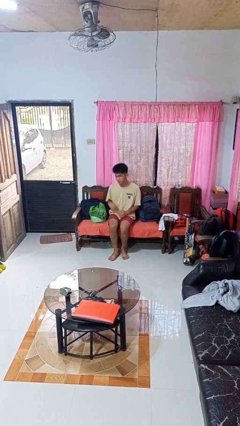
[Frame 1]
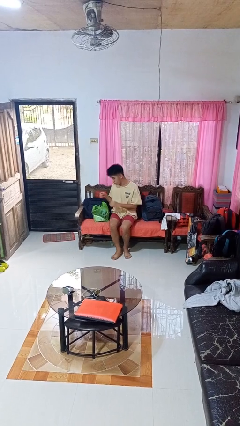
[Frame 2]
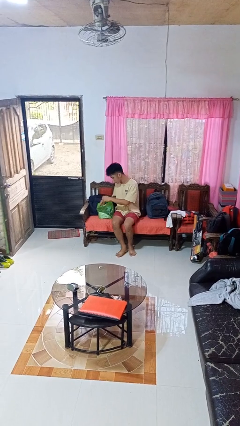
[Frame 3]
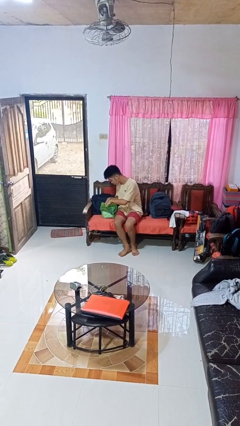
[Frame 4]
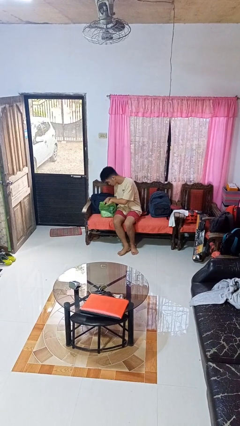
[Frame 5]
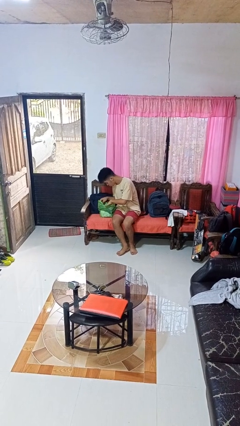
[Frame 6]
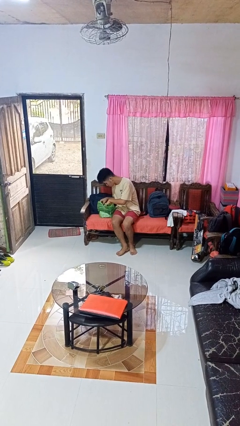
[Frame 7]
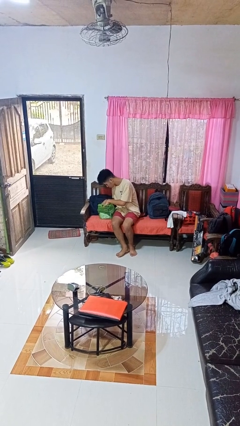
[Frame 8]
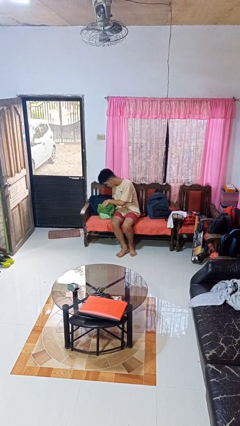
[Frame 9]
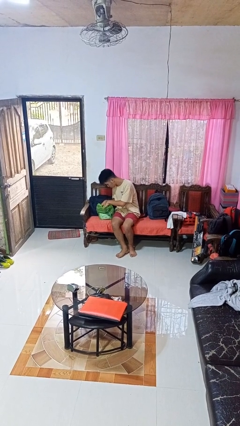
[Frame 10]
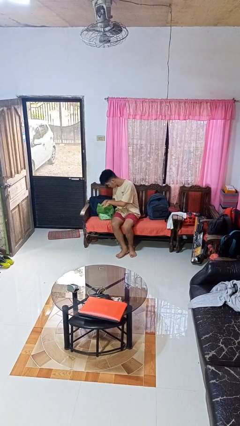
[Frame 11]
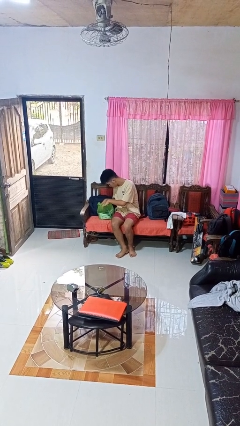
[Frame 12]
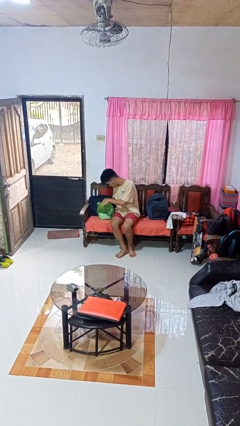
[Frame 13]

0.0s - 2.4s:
person searches in bag

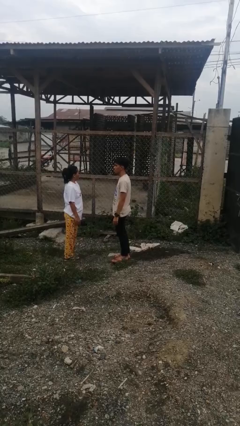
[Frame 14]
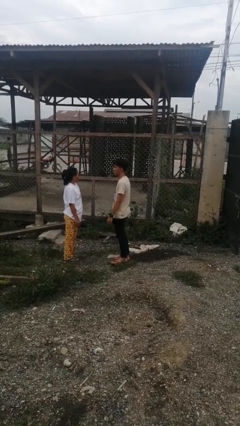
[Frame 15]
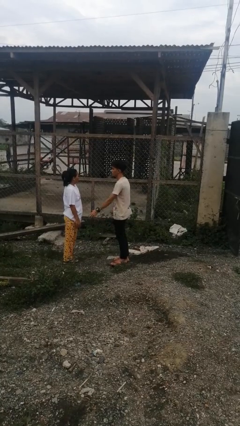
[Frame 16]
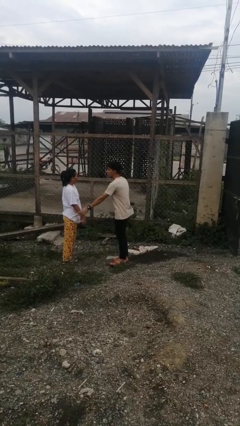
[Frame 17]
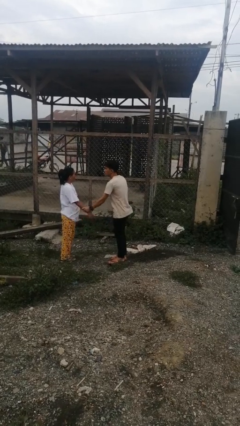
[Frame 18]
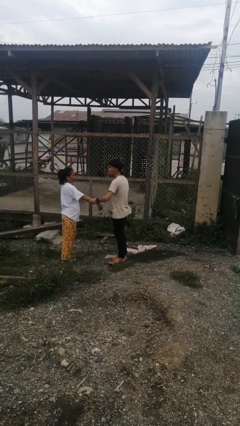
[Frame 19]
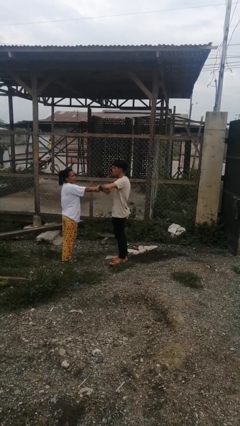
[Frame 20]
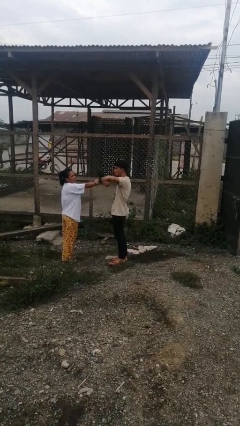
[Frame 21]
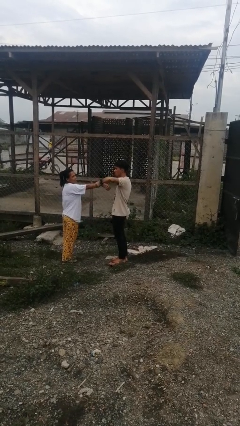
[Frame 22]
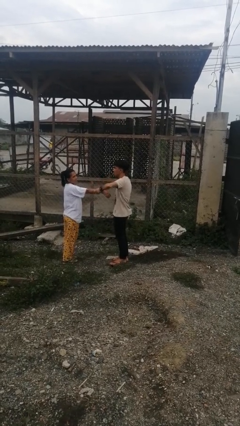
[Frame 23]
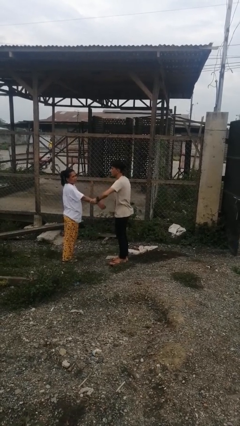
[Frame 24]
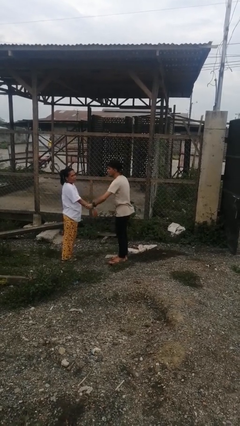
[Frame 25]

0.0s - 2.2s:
person grabs person by forearm

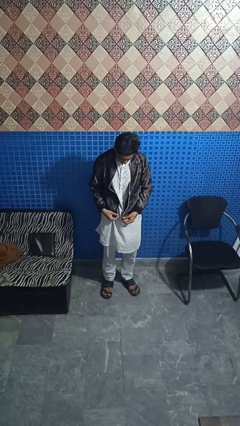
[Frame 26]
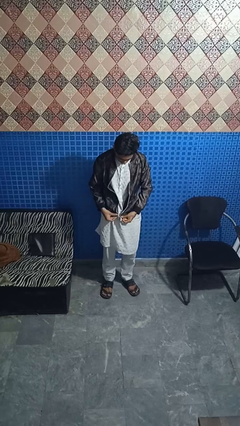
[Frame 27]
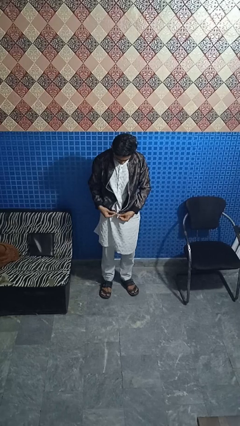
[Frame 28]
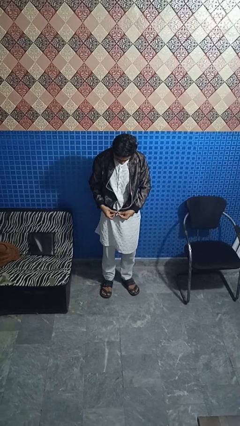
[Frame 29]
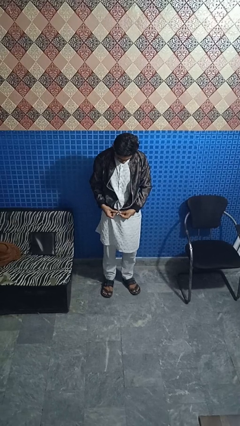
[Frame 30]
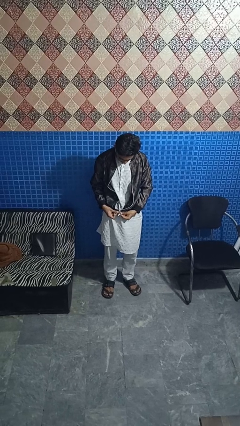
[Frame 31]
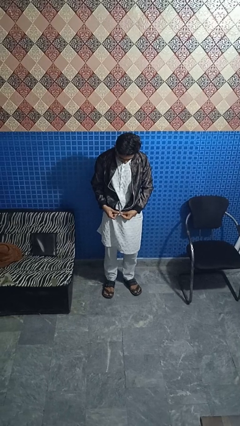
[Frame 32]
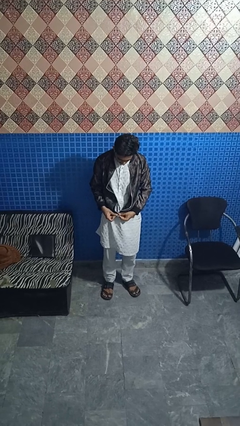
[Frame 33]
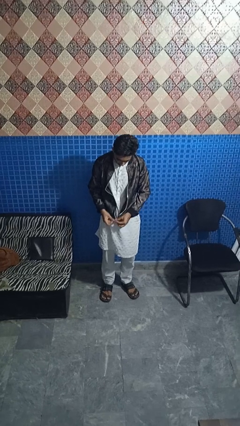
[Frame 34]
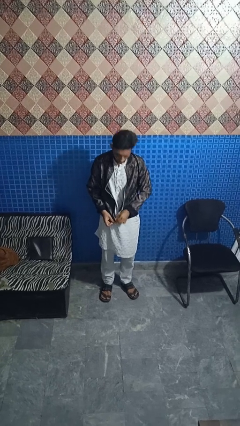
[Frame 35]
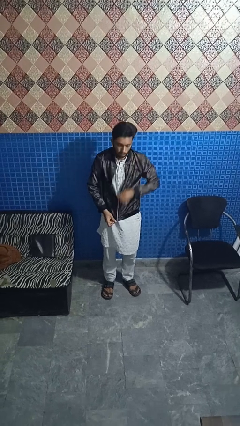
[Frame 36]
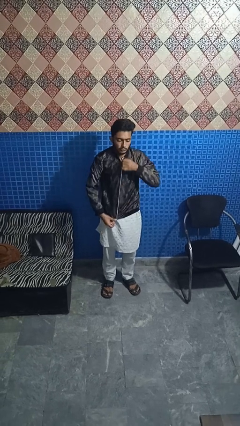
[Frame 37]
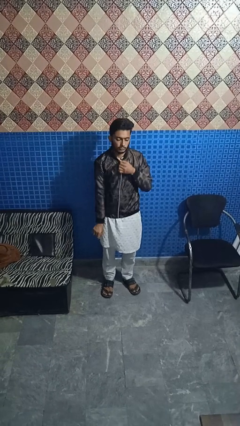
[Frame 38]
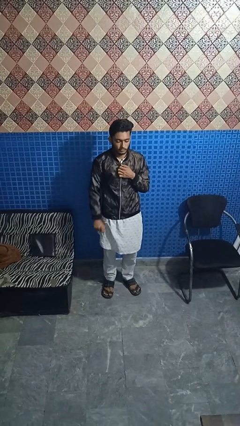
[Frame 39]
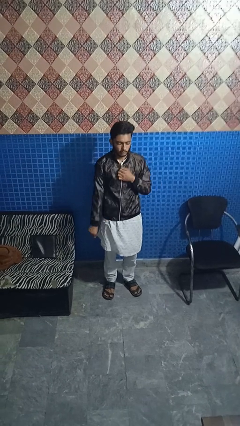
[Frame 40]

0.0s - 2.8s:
person zips up jacket

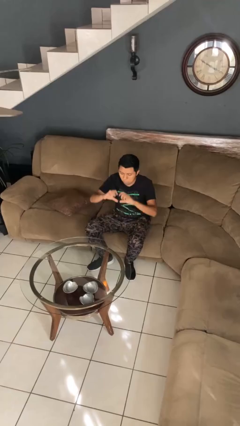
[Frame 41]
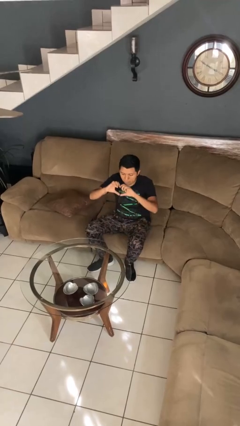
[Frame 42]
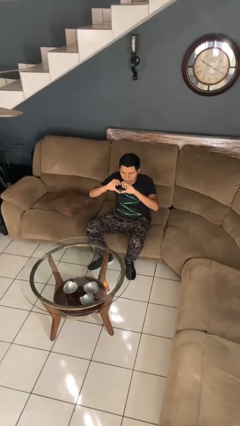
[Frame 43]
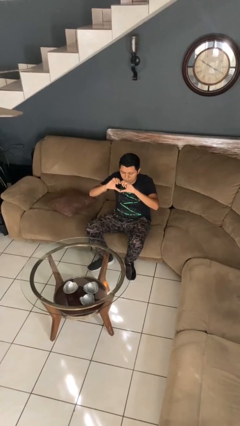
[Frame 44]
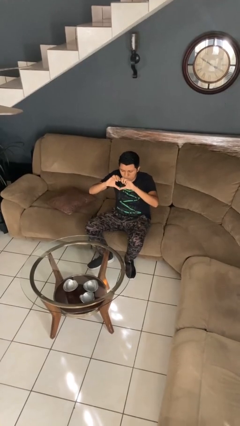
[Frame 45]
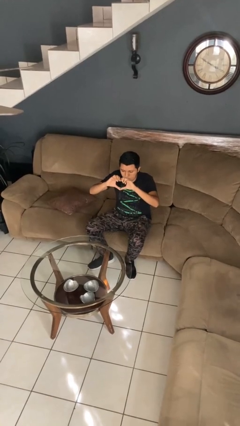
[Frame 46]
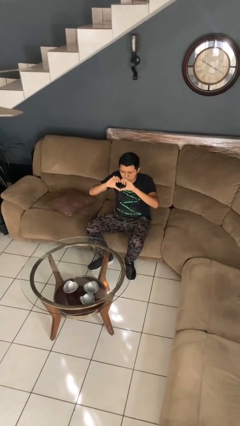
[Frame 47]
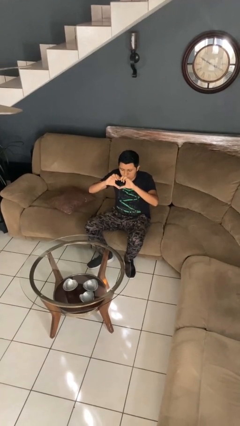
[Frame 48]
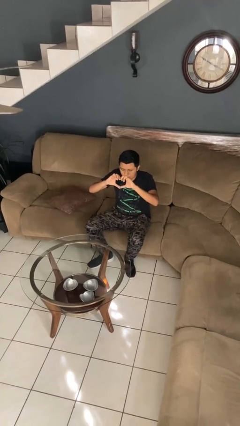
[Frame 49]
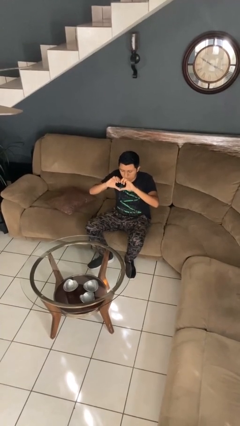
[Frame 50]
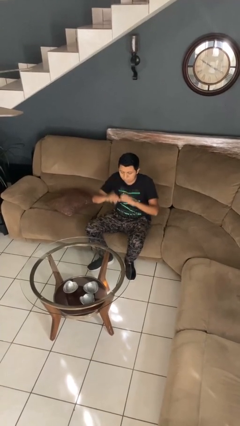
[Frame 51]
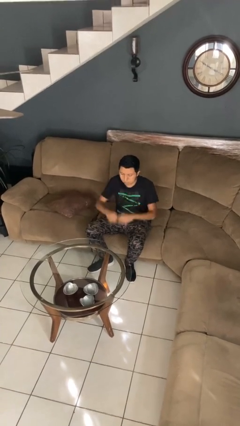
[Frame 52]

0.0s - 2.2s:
person gestures heart

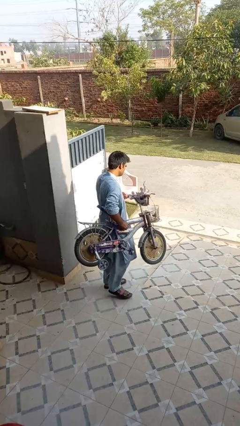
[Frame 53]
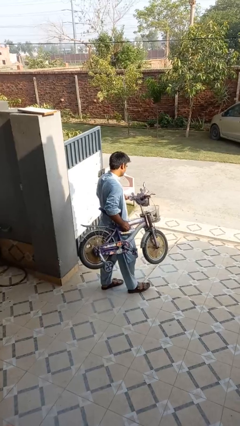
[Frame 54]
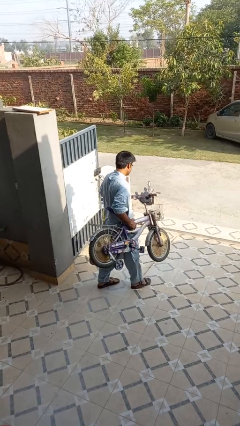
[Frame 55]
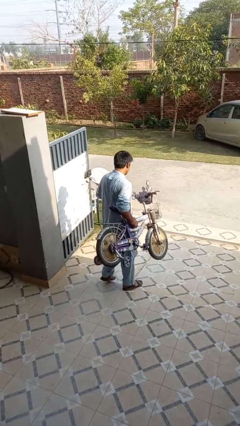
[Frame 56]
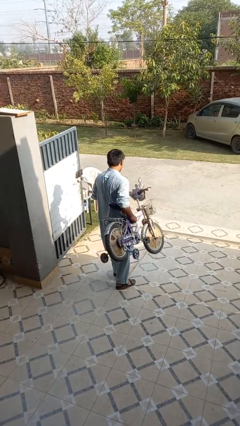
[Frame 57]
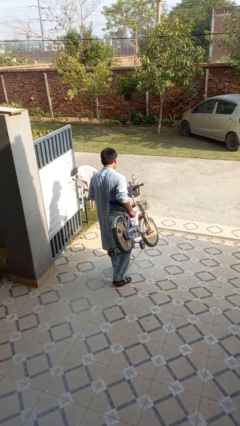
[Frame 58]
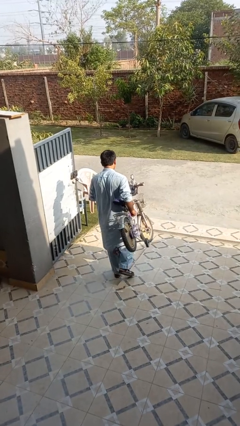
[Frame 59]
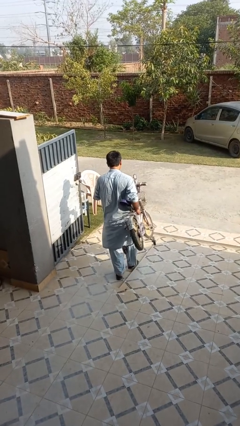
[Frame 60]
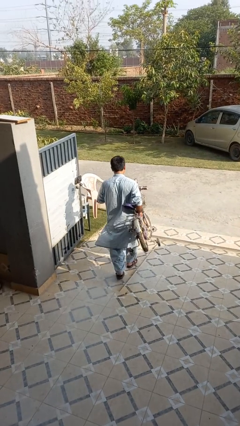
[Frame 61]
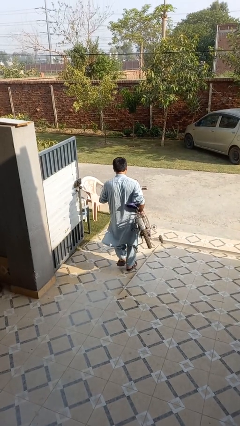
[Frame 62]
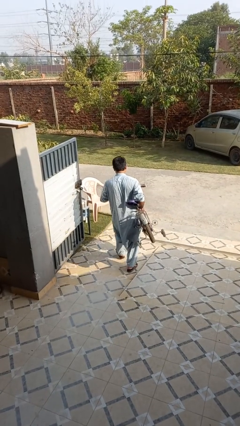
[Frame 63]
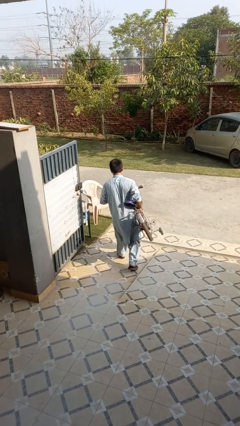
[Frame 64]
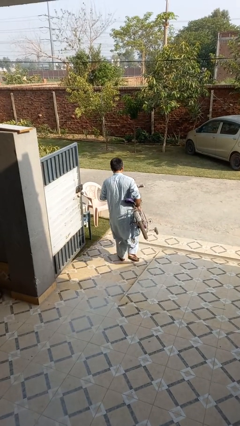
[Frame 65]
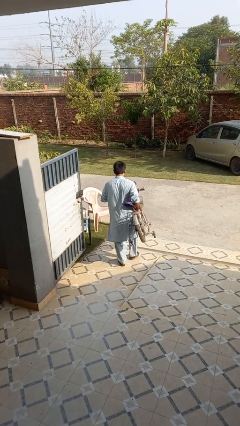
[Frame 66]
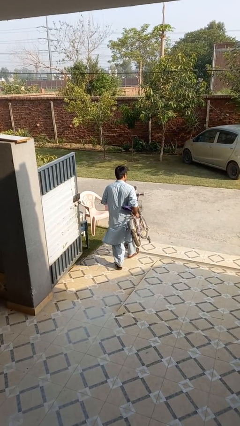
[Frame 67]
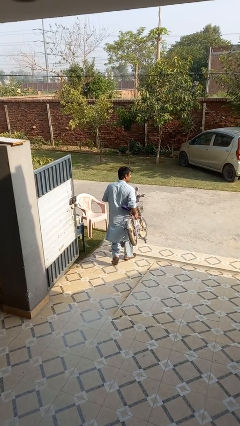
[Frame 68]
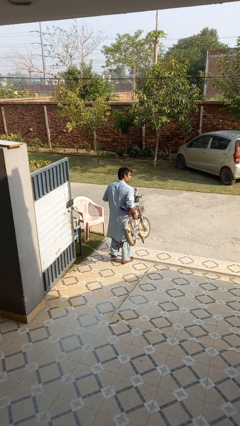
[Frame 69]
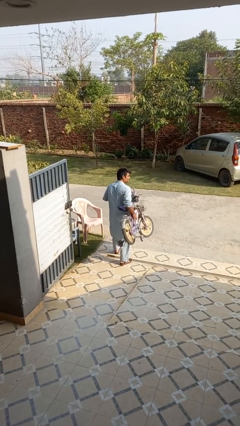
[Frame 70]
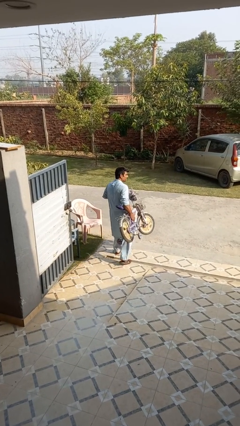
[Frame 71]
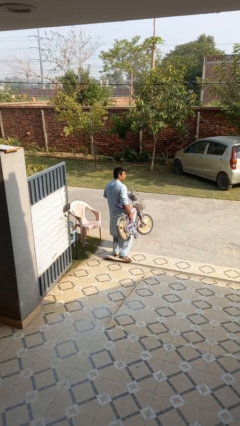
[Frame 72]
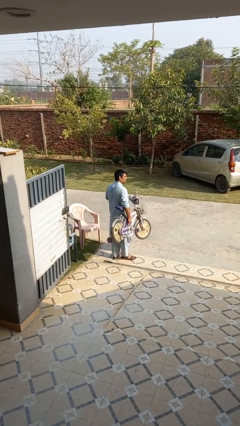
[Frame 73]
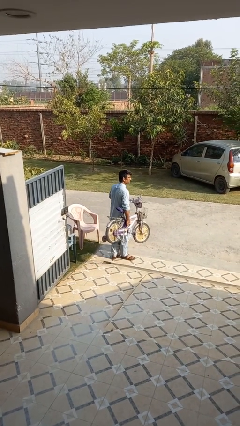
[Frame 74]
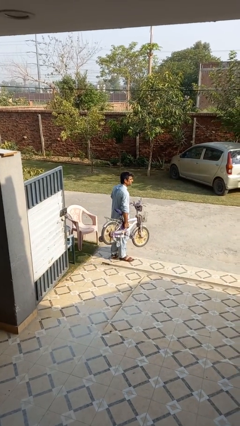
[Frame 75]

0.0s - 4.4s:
person carries bicycle

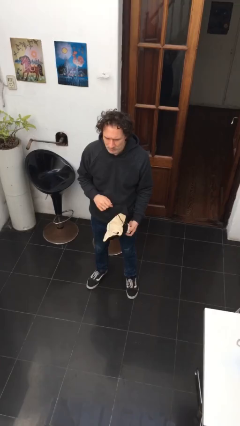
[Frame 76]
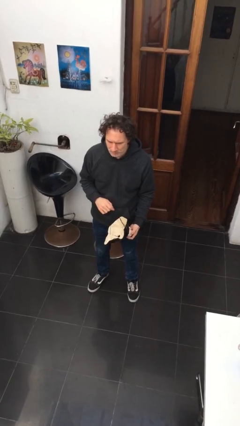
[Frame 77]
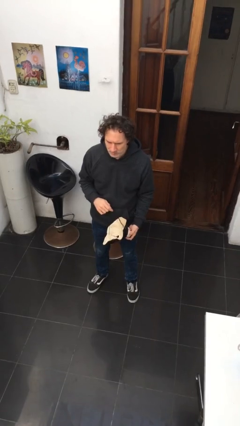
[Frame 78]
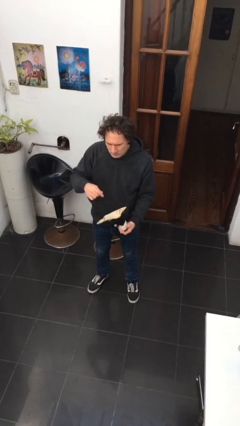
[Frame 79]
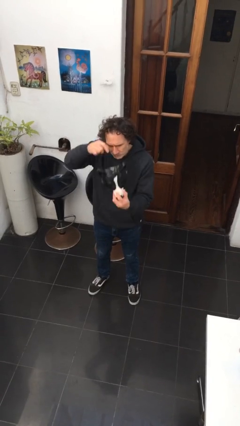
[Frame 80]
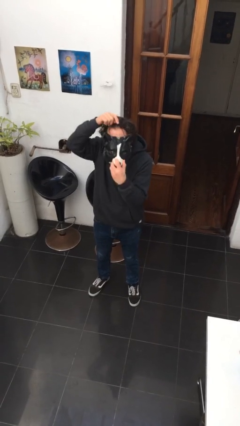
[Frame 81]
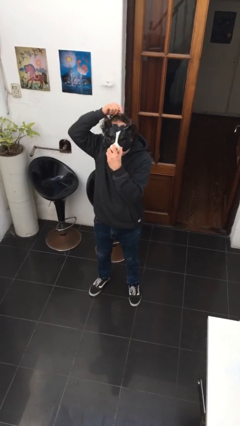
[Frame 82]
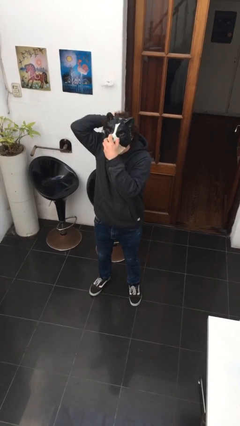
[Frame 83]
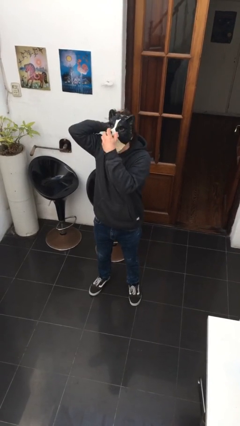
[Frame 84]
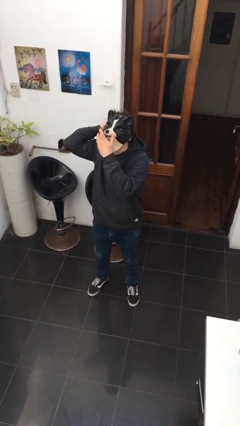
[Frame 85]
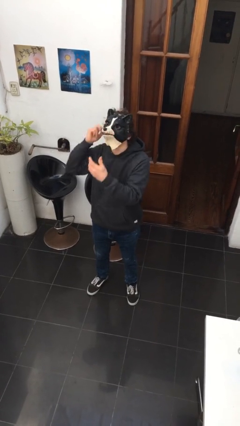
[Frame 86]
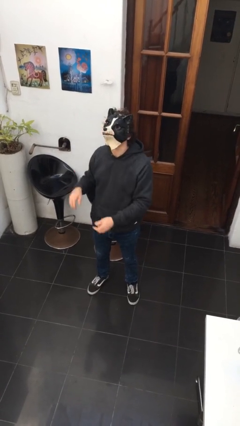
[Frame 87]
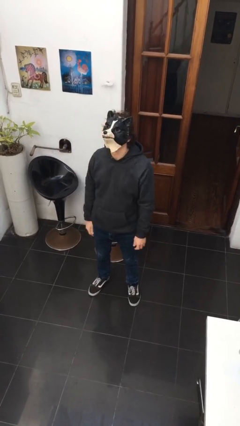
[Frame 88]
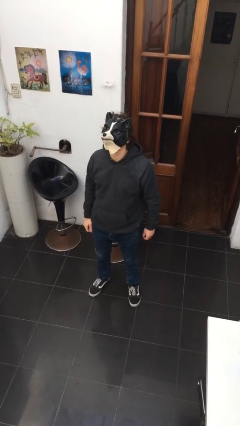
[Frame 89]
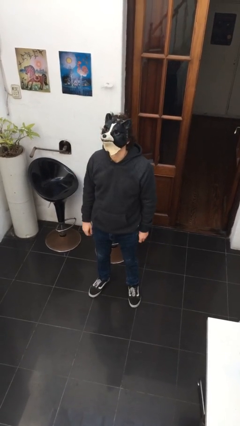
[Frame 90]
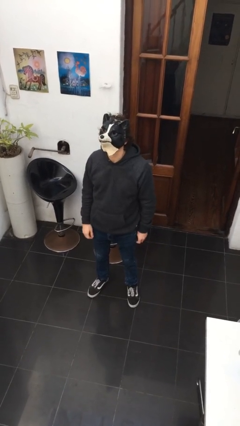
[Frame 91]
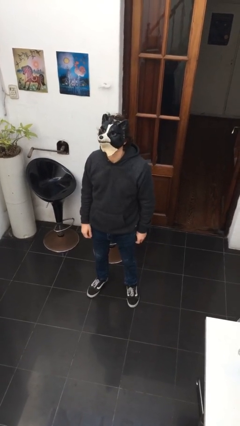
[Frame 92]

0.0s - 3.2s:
person puts on facemask

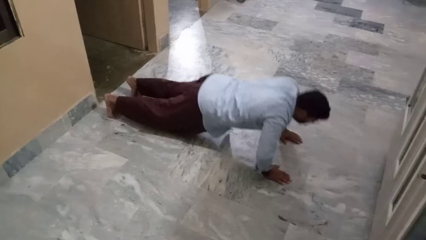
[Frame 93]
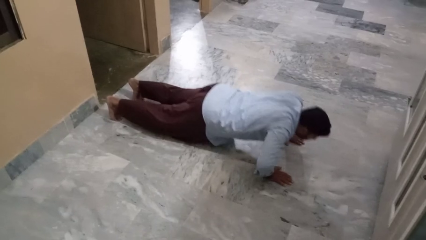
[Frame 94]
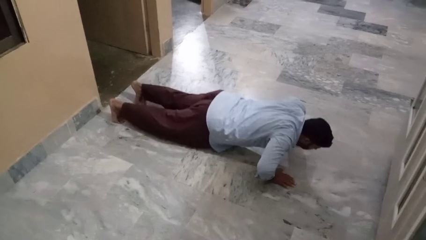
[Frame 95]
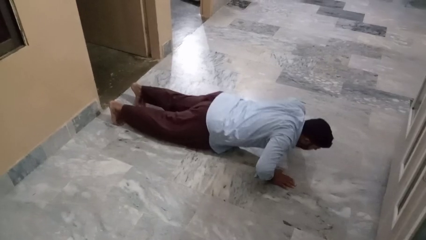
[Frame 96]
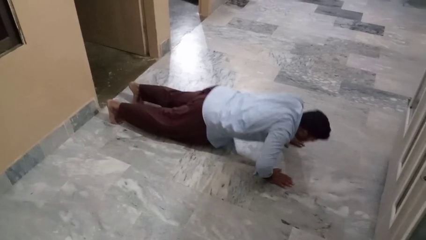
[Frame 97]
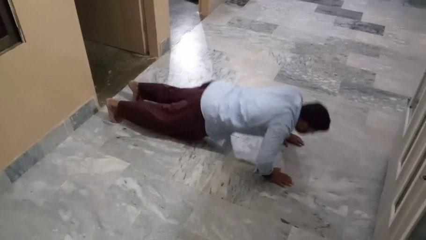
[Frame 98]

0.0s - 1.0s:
person exercises with pushup
